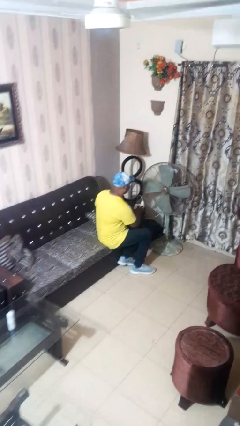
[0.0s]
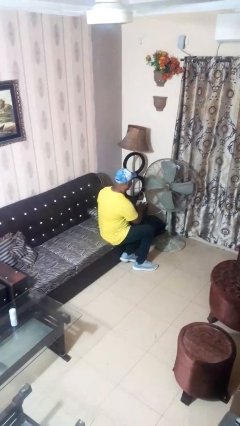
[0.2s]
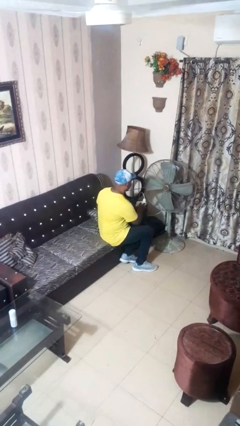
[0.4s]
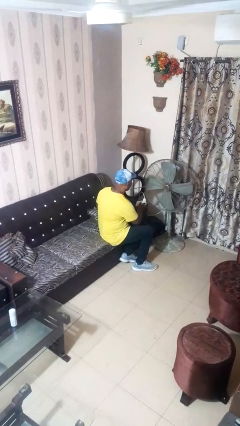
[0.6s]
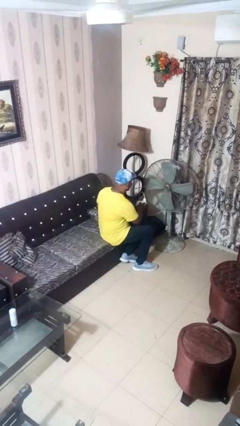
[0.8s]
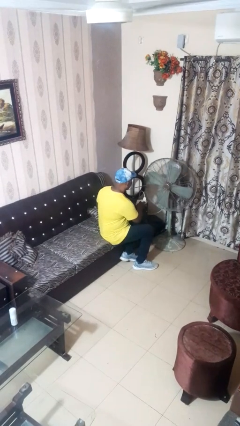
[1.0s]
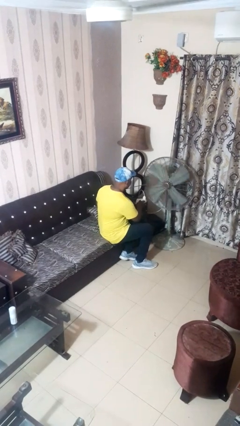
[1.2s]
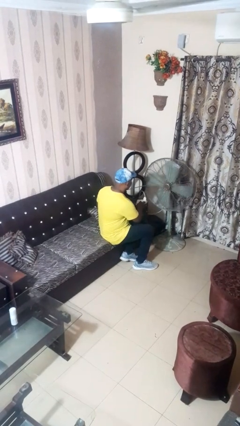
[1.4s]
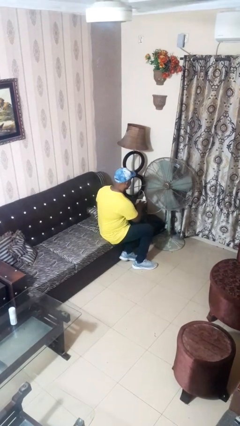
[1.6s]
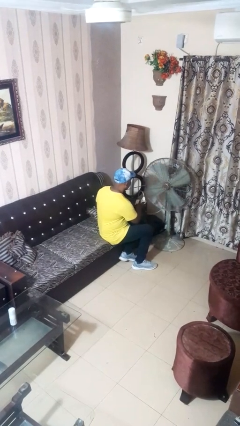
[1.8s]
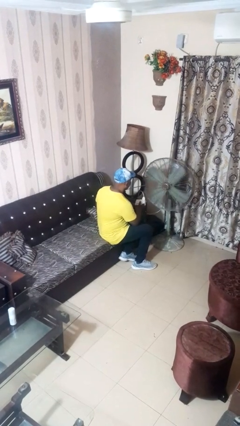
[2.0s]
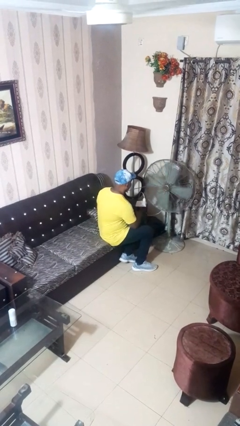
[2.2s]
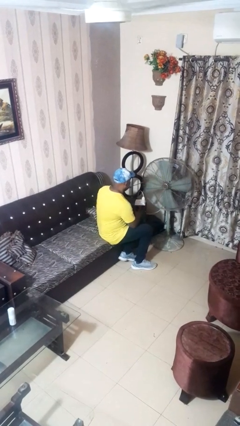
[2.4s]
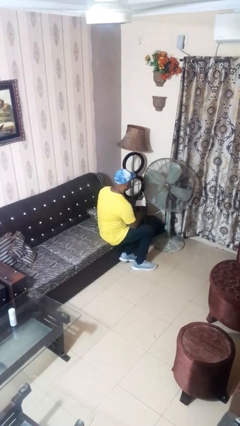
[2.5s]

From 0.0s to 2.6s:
person turns on fan

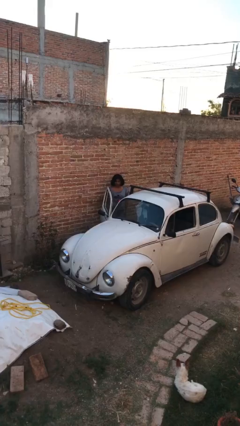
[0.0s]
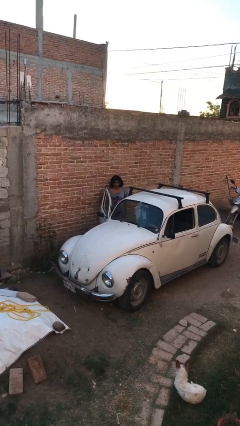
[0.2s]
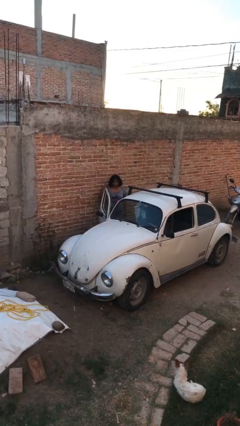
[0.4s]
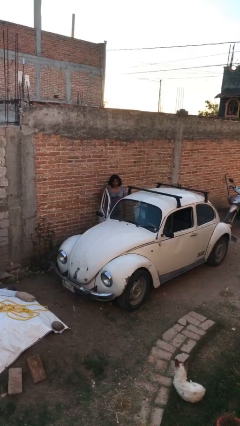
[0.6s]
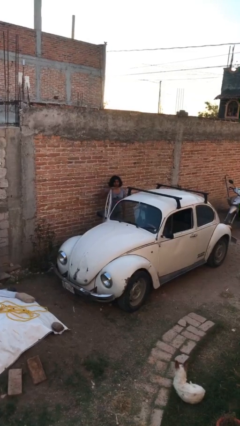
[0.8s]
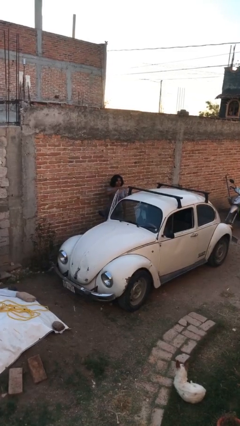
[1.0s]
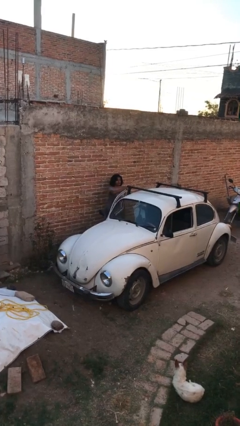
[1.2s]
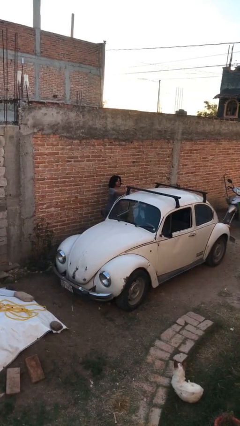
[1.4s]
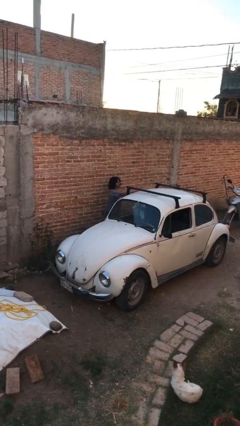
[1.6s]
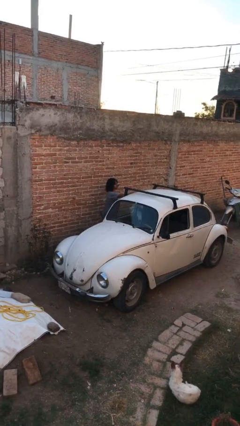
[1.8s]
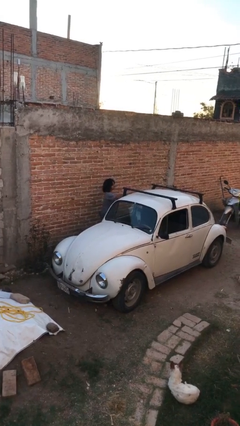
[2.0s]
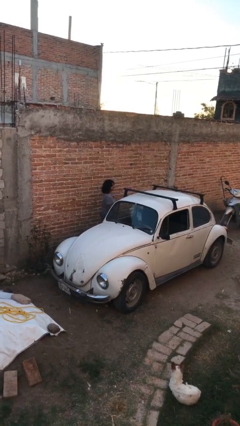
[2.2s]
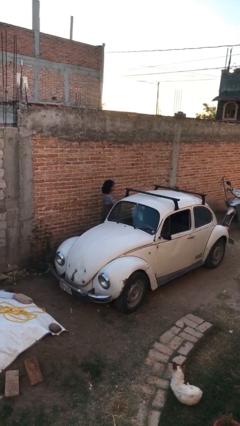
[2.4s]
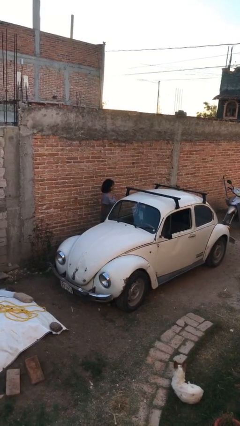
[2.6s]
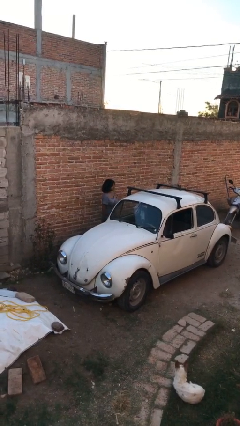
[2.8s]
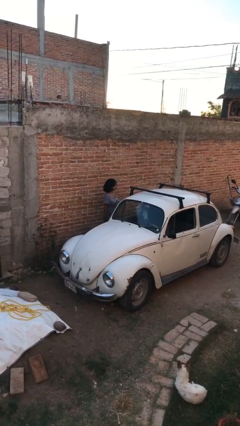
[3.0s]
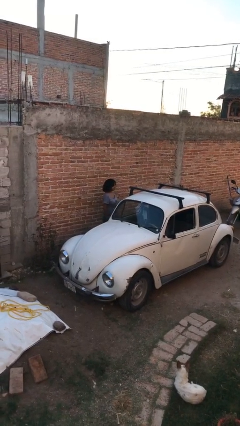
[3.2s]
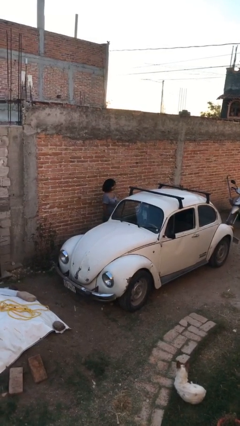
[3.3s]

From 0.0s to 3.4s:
person closes car door

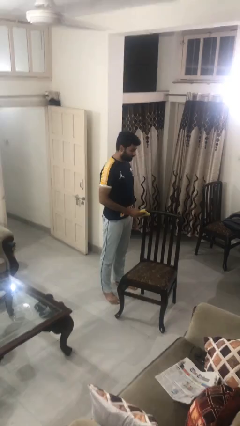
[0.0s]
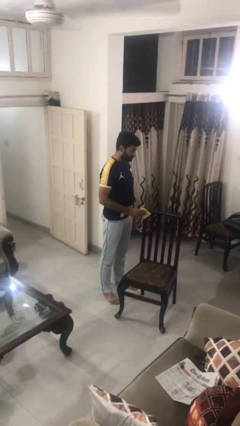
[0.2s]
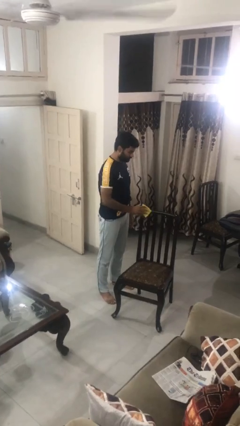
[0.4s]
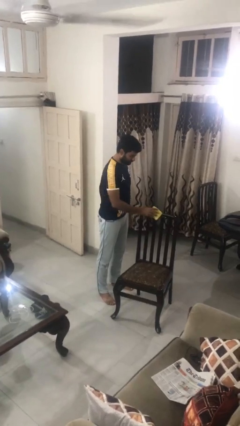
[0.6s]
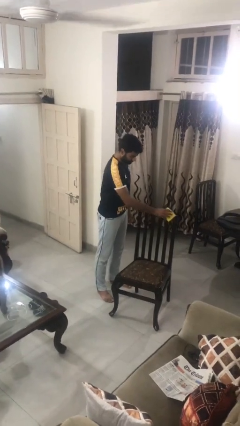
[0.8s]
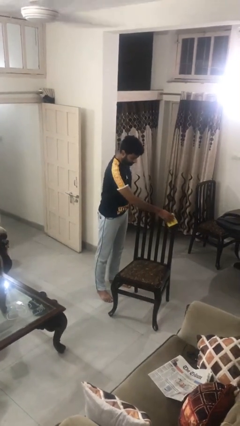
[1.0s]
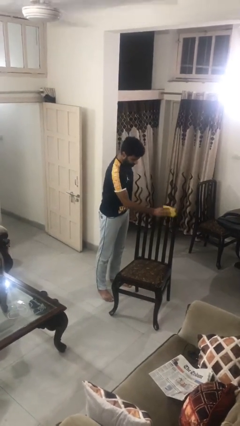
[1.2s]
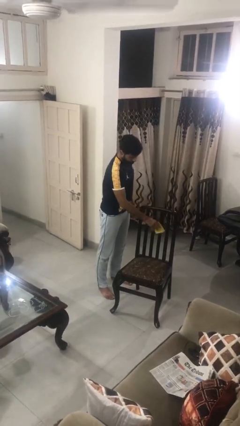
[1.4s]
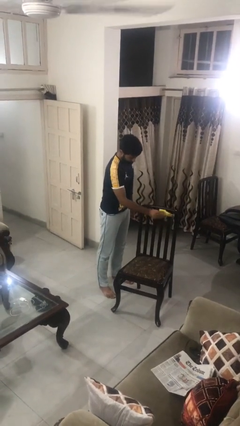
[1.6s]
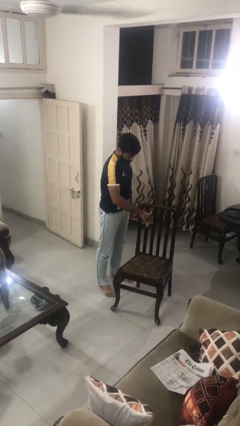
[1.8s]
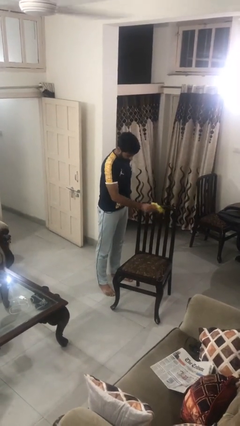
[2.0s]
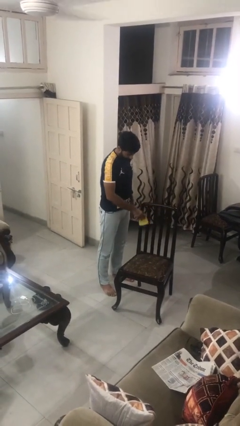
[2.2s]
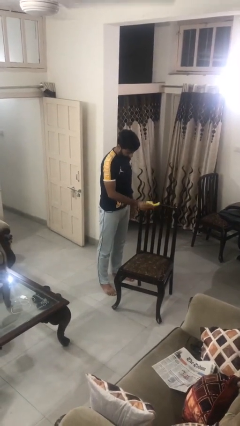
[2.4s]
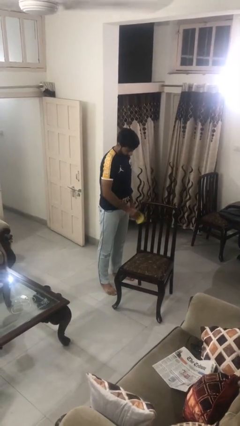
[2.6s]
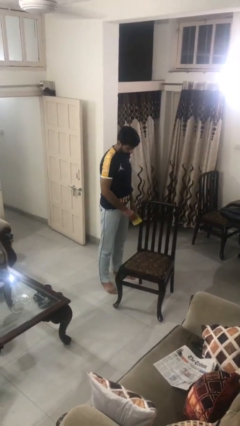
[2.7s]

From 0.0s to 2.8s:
person dusts furniture

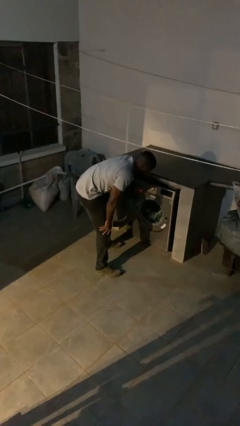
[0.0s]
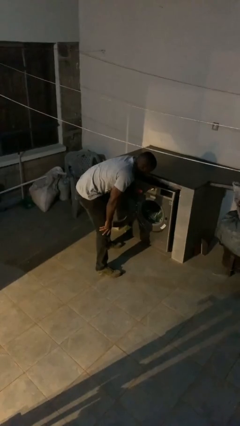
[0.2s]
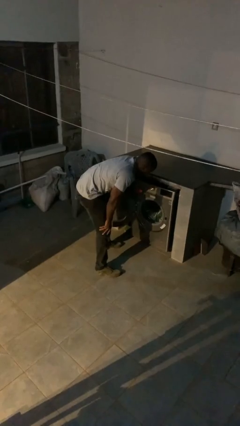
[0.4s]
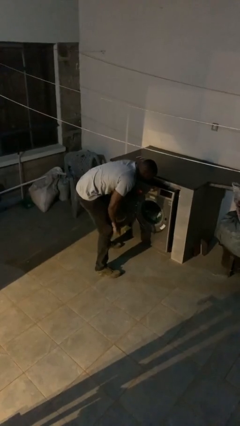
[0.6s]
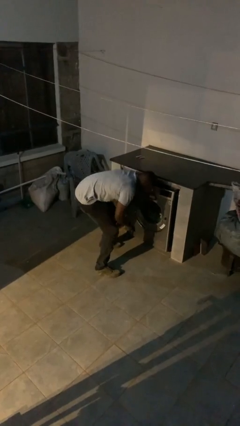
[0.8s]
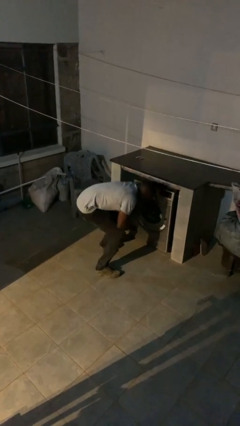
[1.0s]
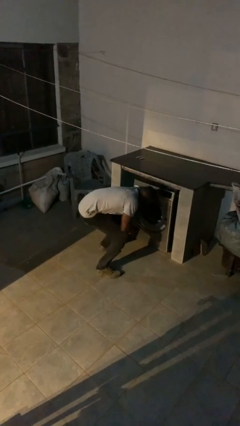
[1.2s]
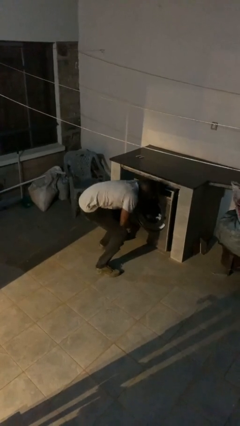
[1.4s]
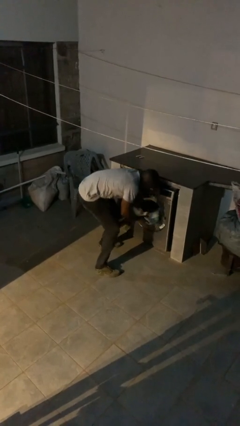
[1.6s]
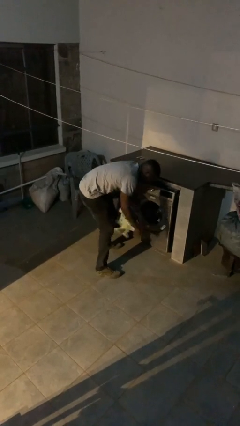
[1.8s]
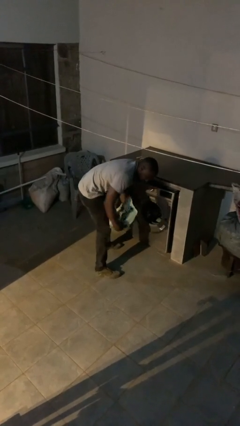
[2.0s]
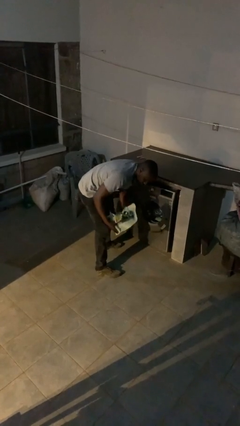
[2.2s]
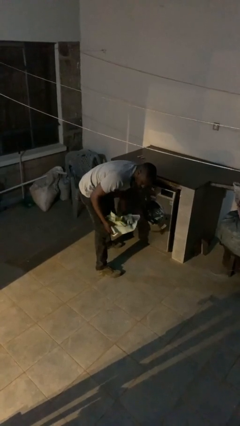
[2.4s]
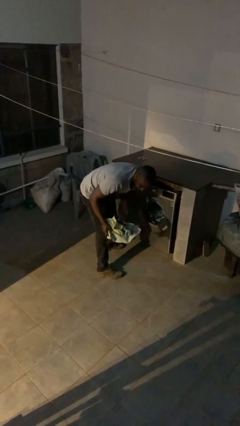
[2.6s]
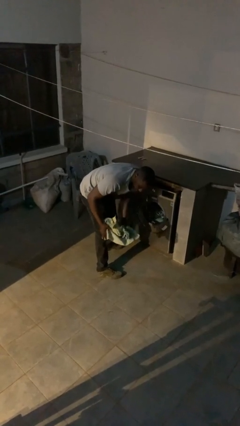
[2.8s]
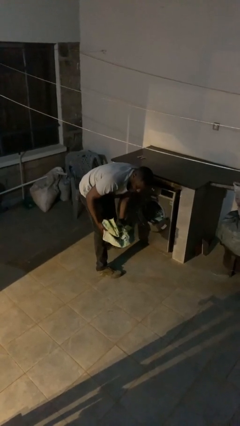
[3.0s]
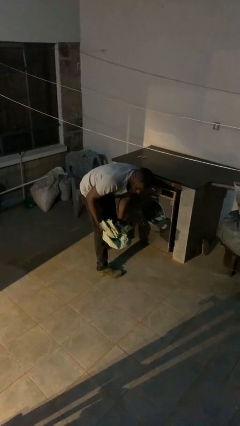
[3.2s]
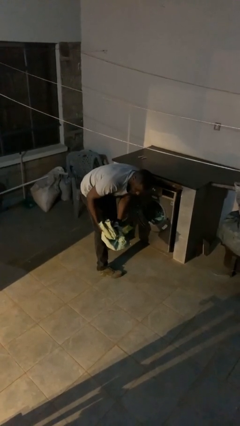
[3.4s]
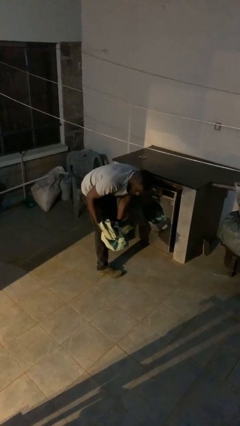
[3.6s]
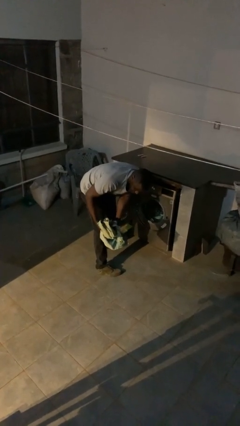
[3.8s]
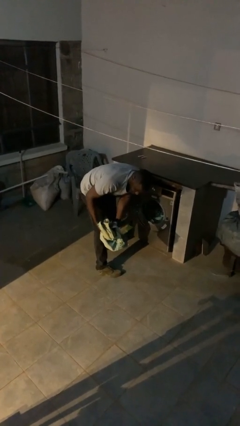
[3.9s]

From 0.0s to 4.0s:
person unloads clotheswasher

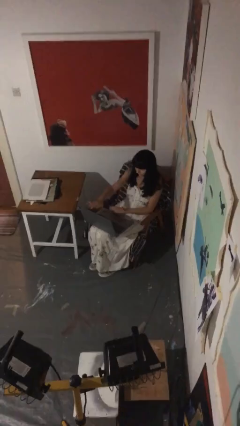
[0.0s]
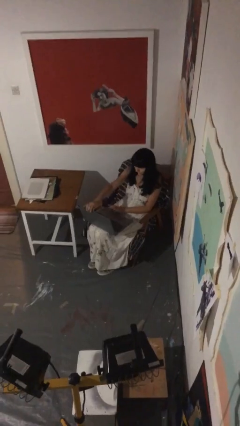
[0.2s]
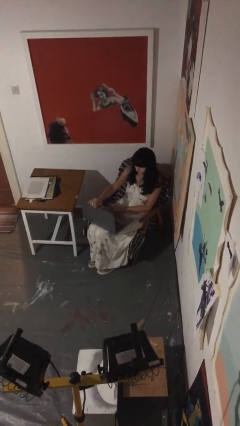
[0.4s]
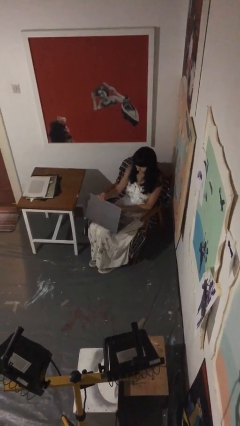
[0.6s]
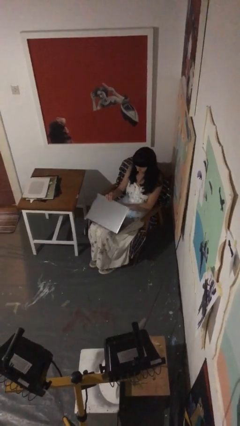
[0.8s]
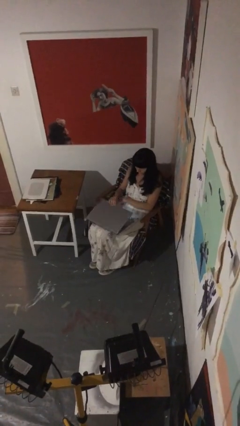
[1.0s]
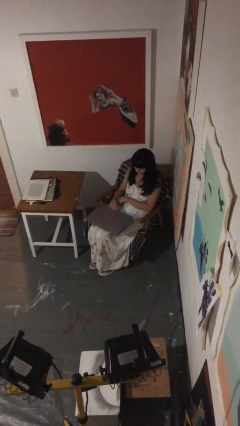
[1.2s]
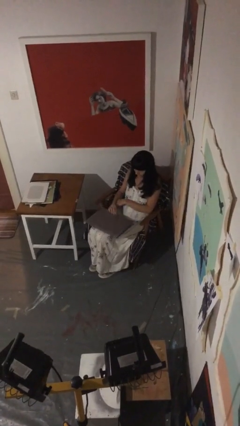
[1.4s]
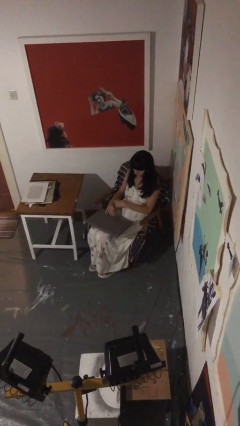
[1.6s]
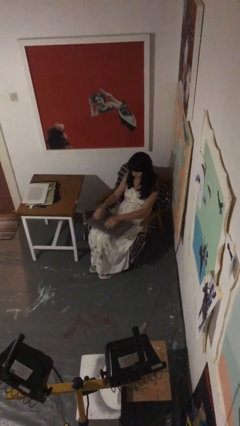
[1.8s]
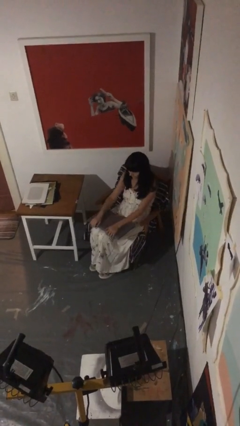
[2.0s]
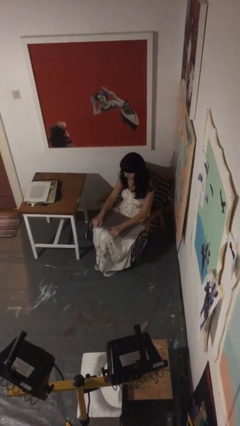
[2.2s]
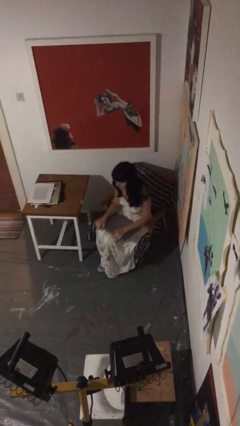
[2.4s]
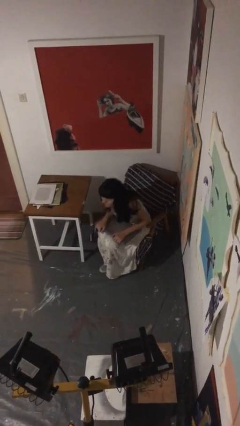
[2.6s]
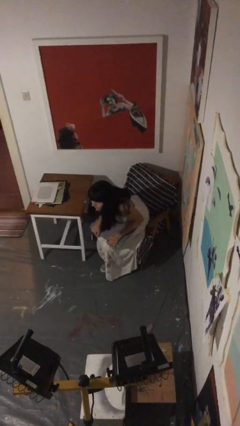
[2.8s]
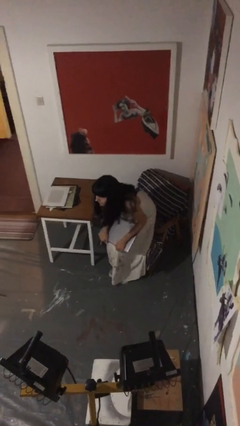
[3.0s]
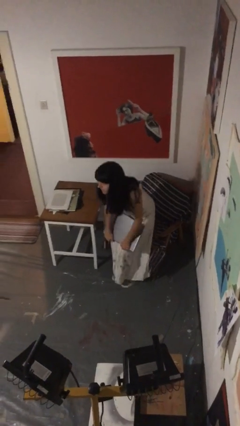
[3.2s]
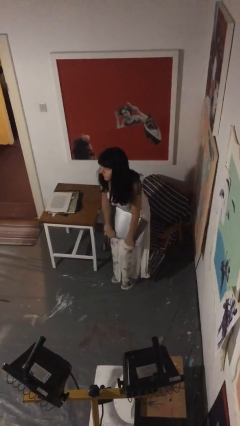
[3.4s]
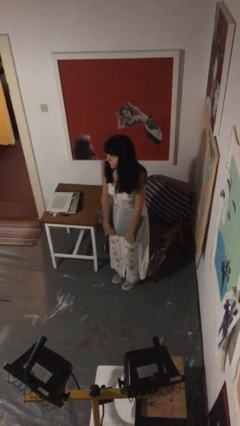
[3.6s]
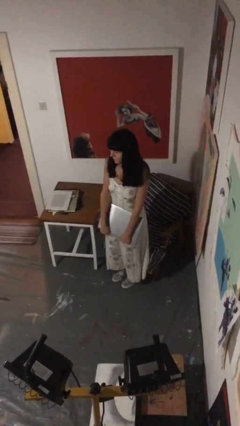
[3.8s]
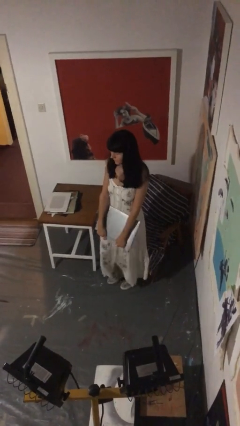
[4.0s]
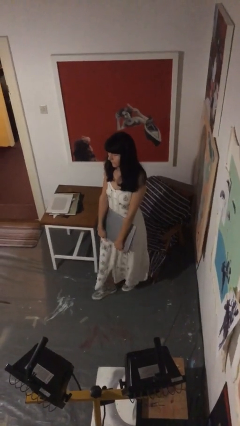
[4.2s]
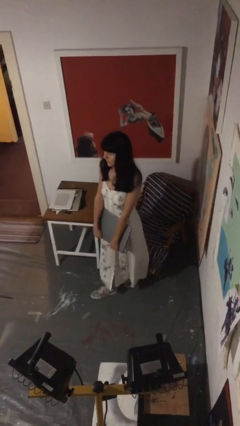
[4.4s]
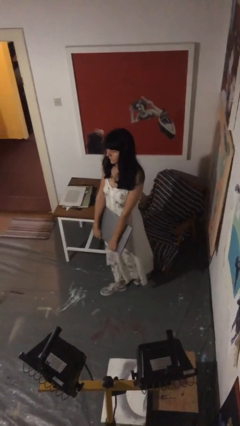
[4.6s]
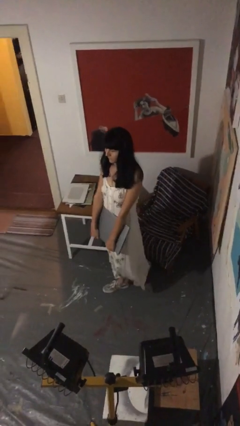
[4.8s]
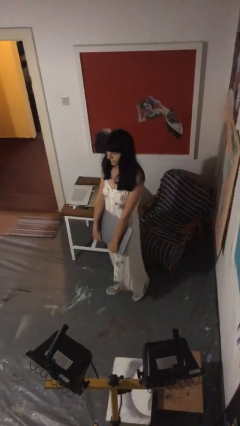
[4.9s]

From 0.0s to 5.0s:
person stands up
